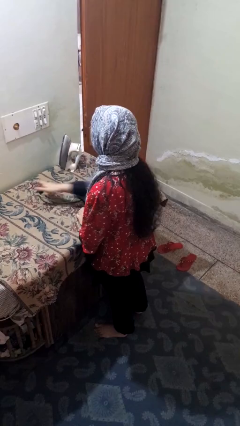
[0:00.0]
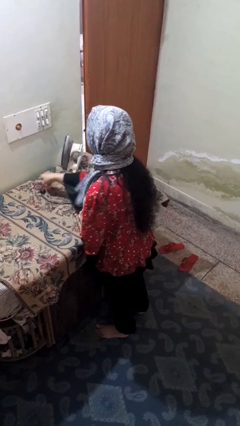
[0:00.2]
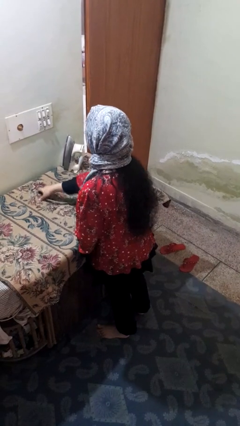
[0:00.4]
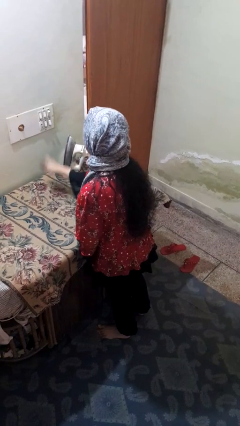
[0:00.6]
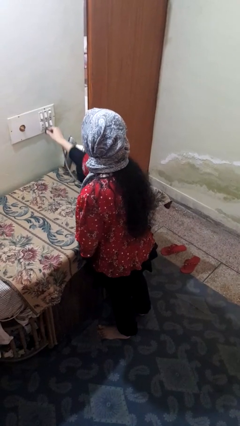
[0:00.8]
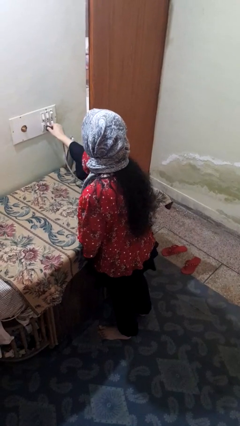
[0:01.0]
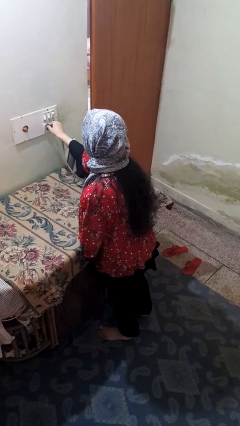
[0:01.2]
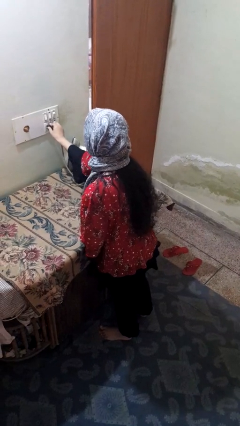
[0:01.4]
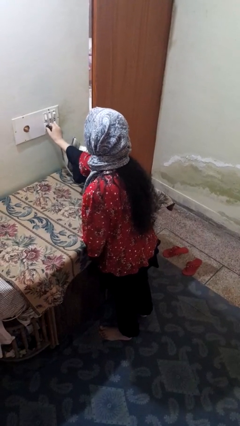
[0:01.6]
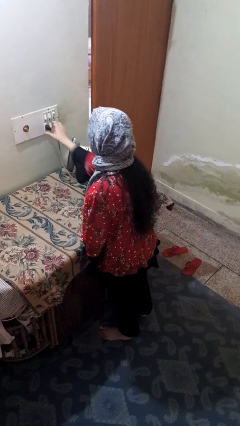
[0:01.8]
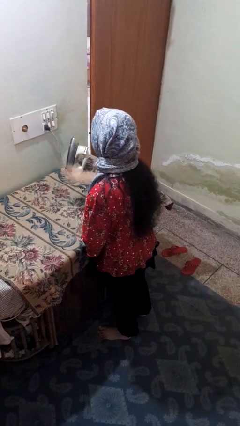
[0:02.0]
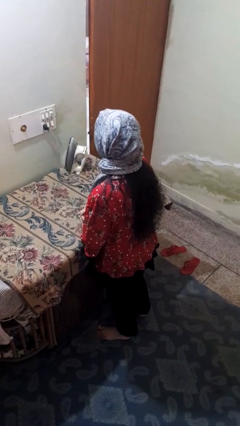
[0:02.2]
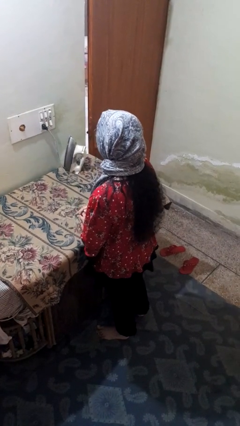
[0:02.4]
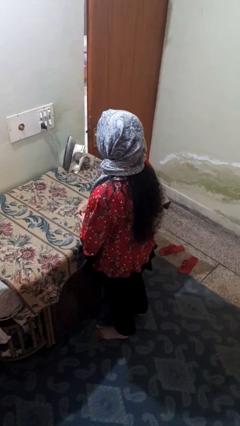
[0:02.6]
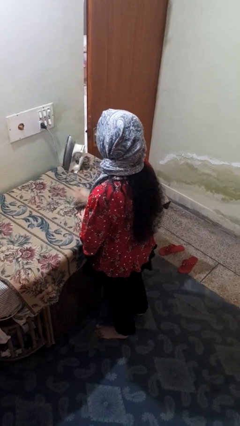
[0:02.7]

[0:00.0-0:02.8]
person plugs into electrical socket

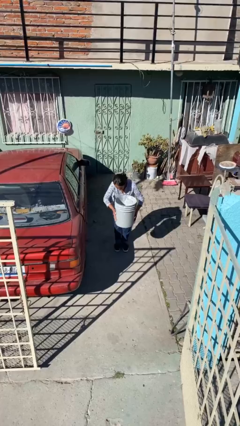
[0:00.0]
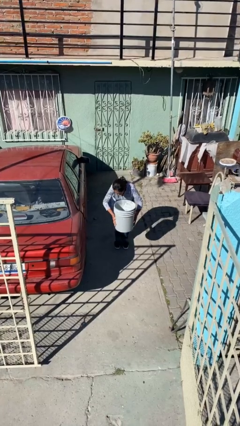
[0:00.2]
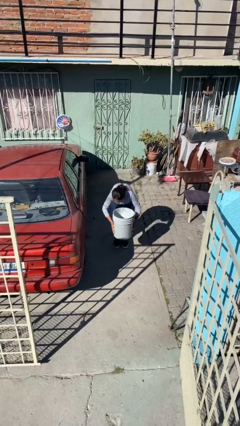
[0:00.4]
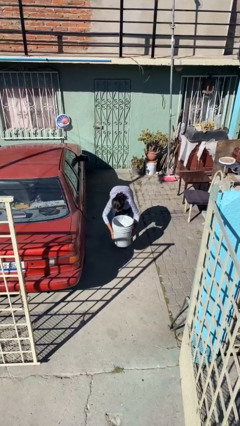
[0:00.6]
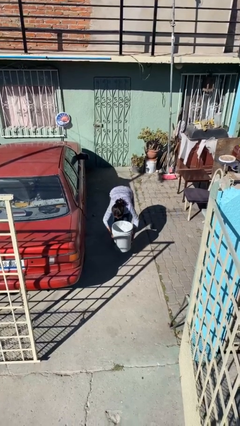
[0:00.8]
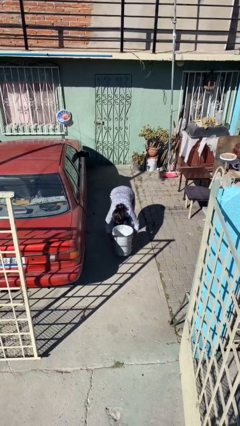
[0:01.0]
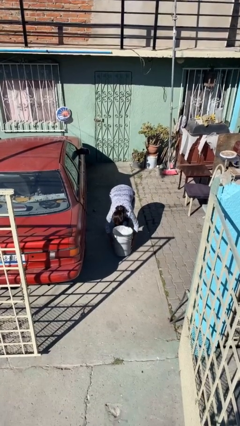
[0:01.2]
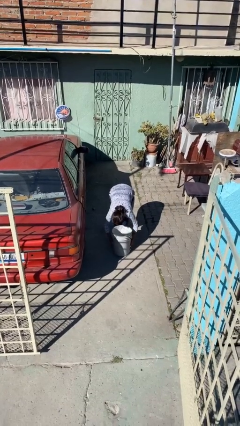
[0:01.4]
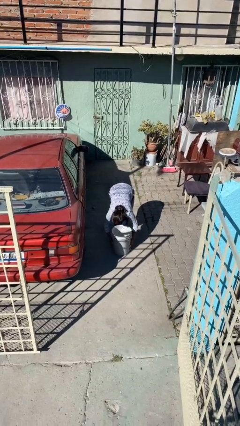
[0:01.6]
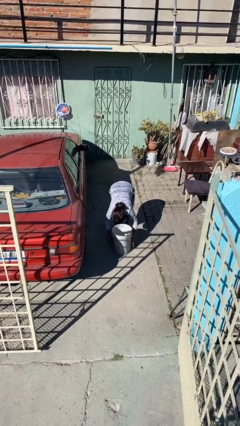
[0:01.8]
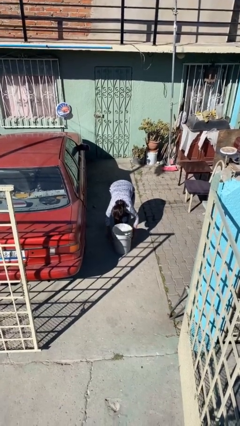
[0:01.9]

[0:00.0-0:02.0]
person puts down object on floor

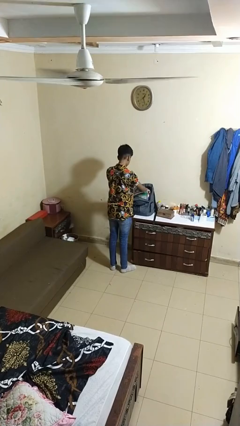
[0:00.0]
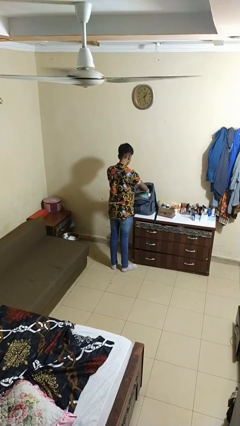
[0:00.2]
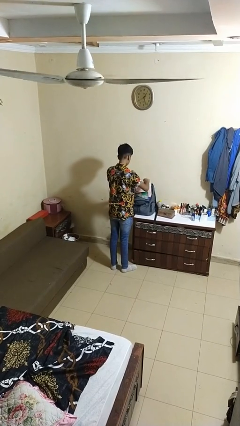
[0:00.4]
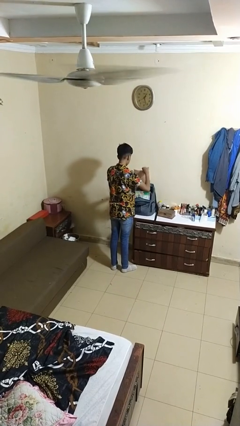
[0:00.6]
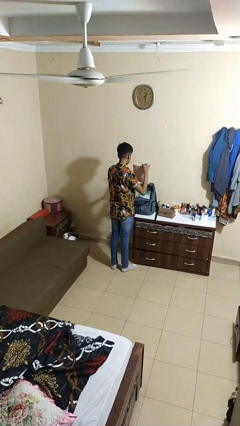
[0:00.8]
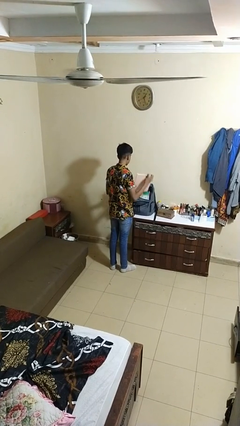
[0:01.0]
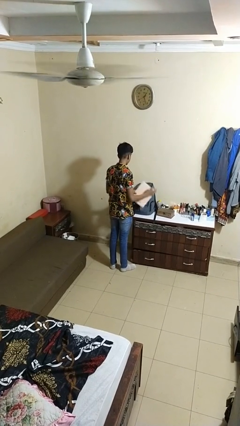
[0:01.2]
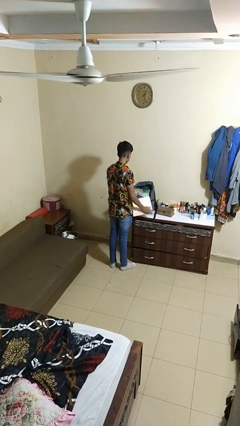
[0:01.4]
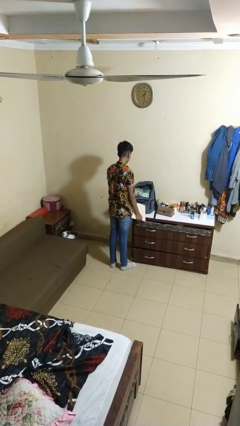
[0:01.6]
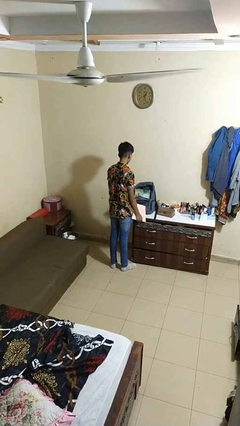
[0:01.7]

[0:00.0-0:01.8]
person takes object from backpack

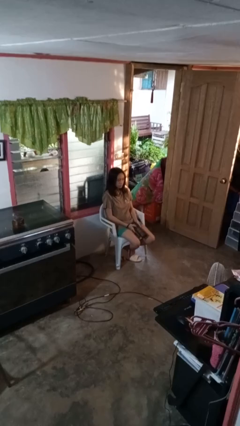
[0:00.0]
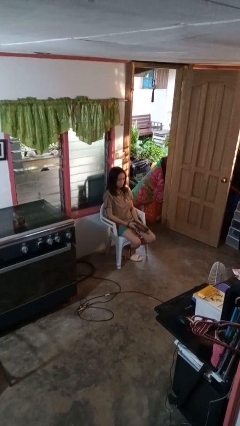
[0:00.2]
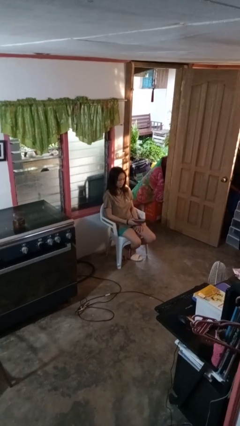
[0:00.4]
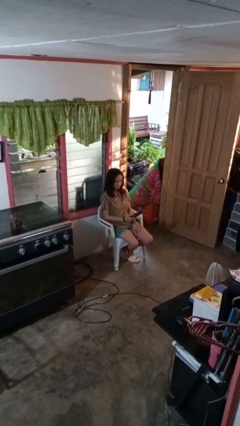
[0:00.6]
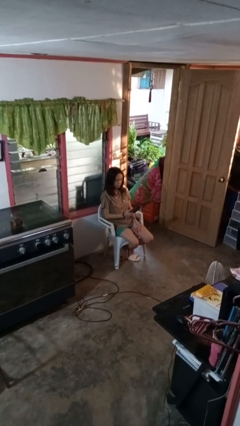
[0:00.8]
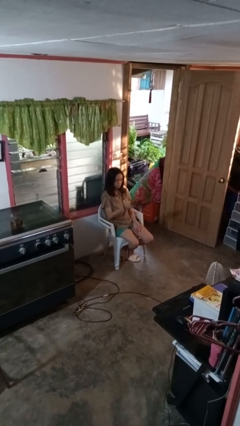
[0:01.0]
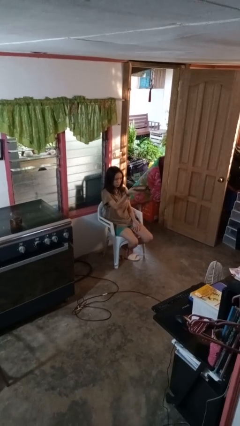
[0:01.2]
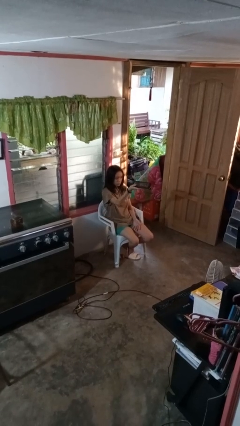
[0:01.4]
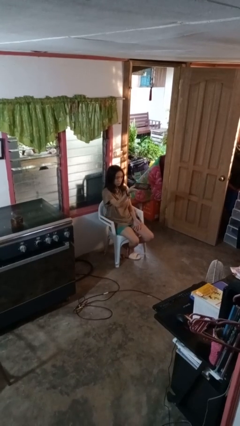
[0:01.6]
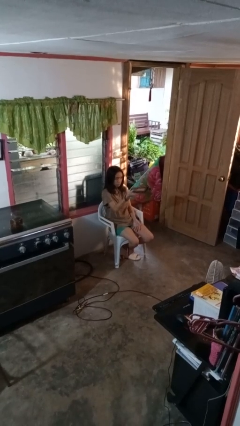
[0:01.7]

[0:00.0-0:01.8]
person uses television remote

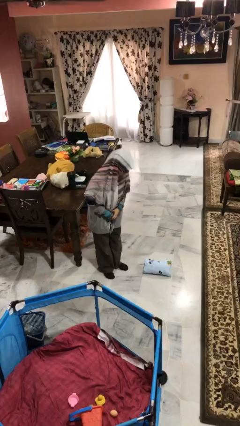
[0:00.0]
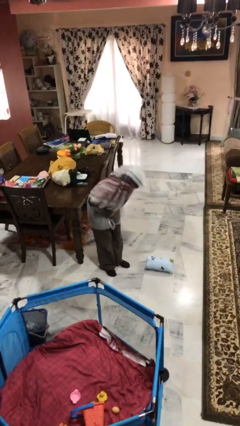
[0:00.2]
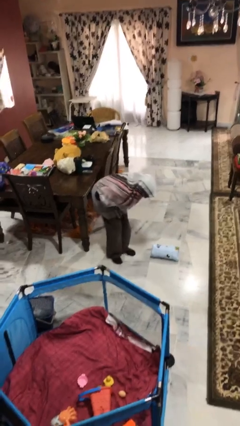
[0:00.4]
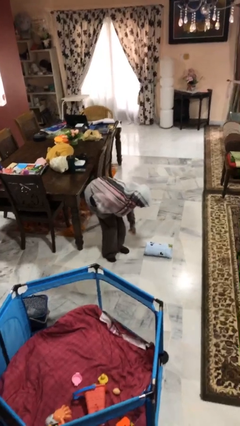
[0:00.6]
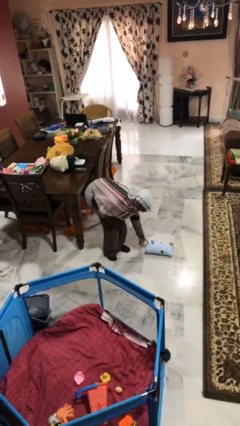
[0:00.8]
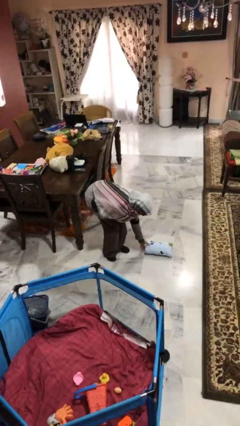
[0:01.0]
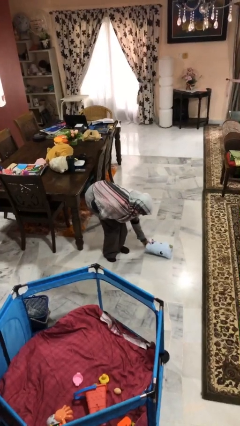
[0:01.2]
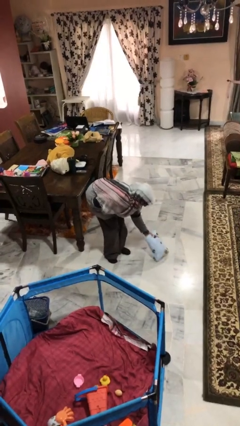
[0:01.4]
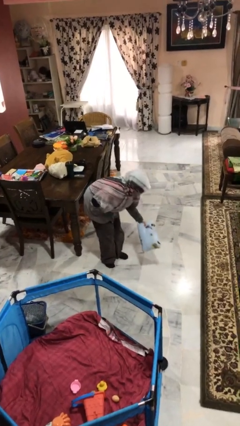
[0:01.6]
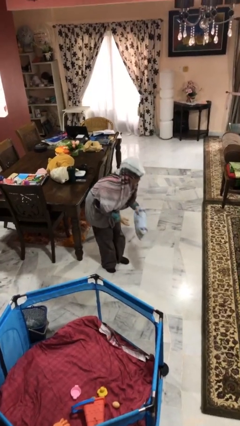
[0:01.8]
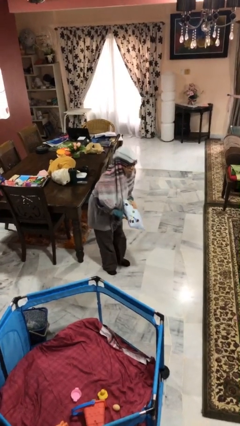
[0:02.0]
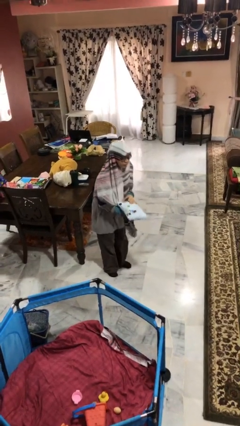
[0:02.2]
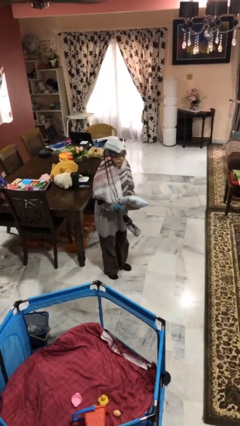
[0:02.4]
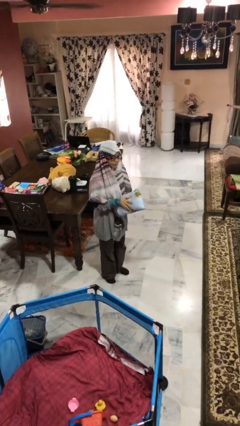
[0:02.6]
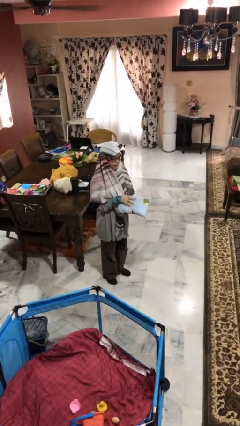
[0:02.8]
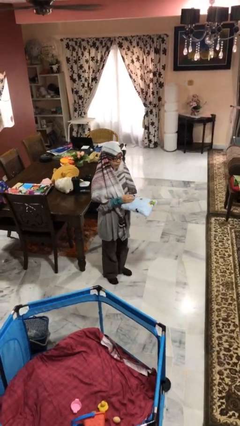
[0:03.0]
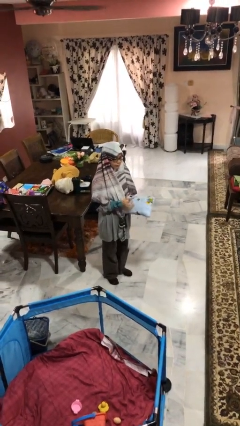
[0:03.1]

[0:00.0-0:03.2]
person picks up object from floor

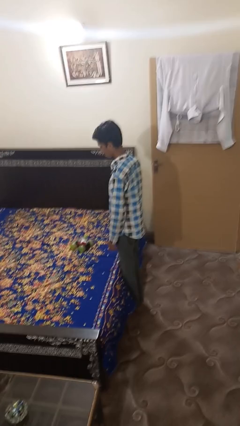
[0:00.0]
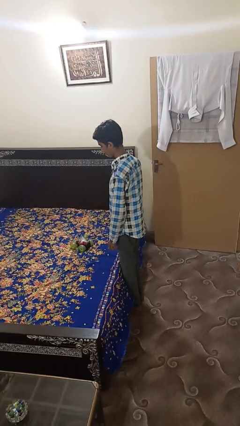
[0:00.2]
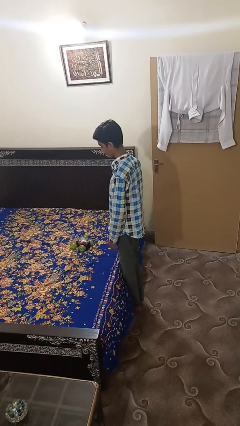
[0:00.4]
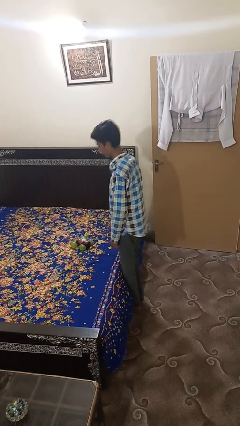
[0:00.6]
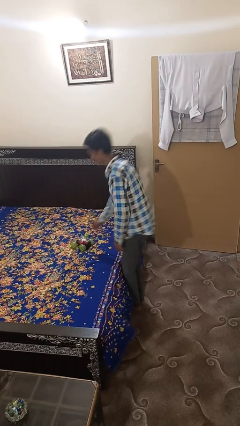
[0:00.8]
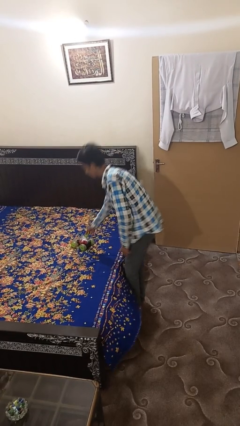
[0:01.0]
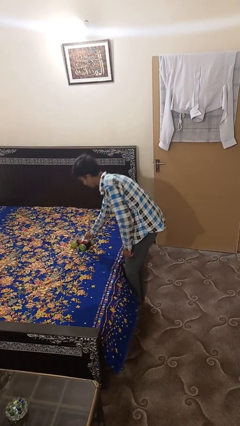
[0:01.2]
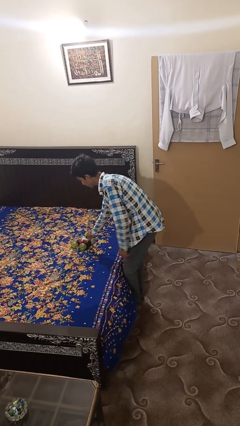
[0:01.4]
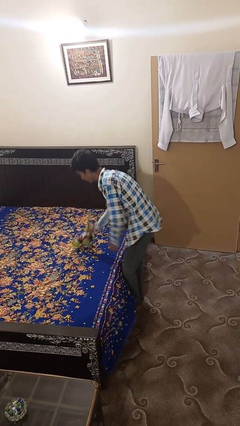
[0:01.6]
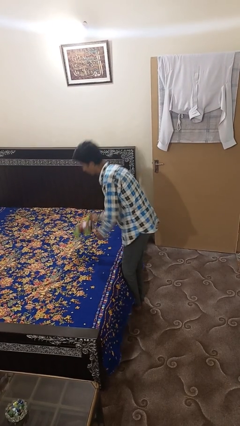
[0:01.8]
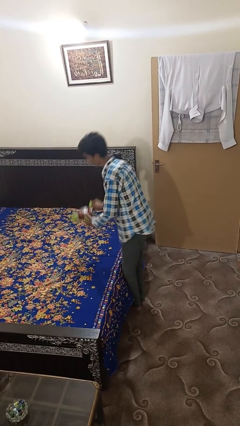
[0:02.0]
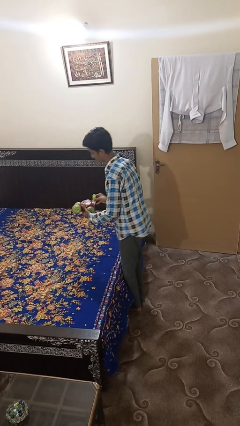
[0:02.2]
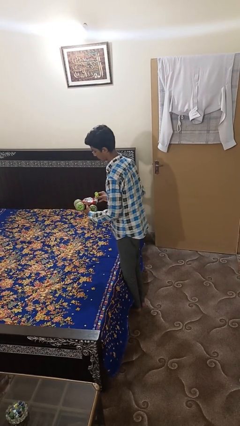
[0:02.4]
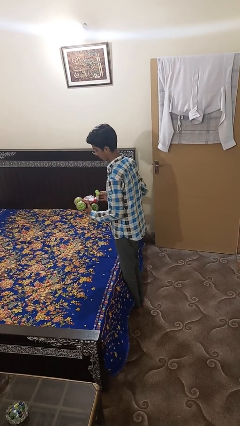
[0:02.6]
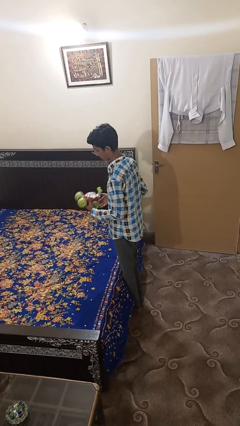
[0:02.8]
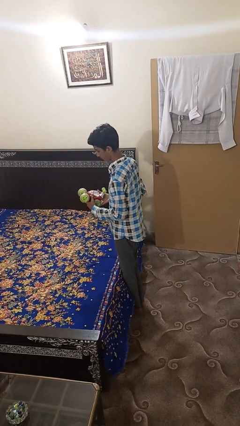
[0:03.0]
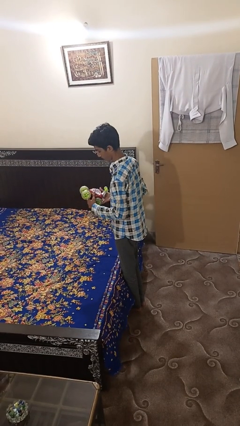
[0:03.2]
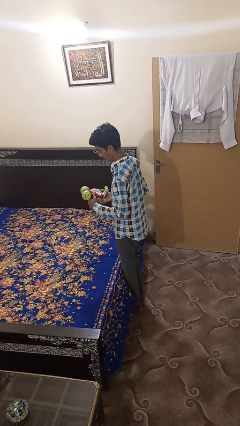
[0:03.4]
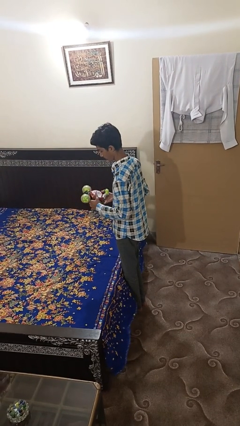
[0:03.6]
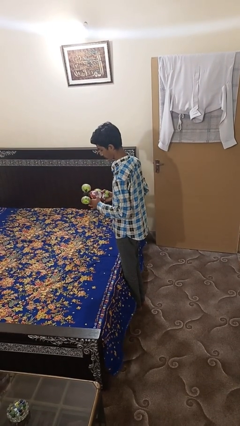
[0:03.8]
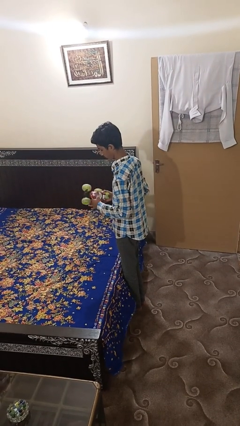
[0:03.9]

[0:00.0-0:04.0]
person picks up object from bed

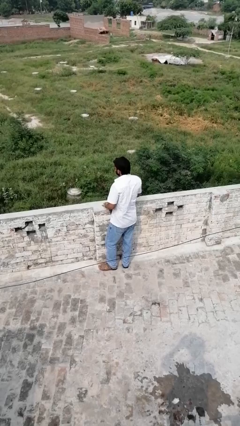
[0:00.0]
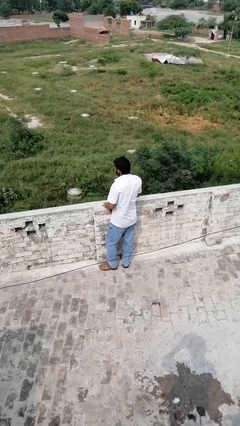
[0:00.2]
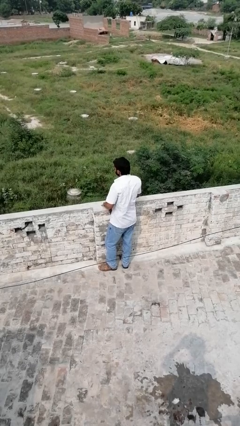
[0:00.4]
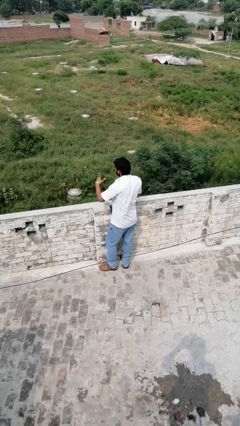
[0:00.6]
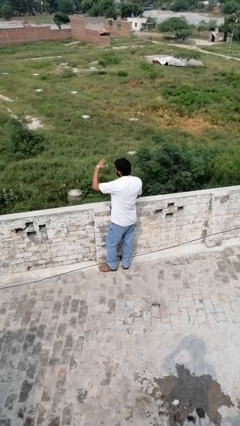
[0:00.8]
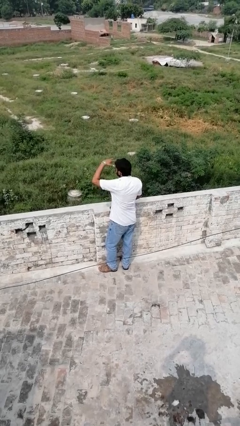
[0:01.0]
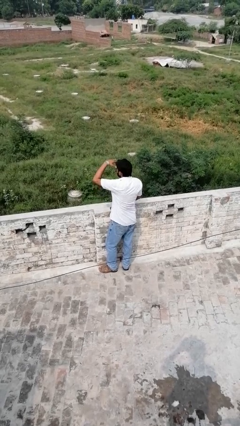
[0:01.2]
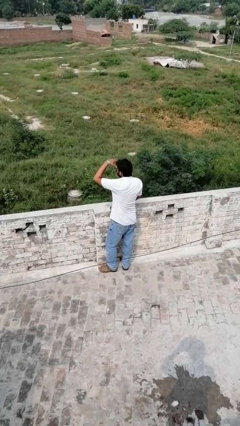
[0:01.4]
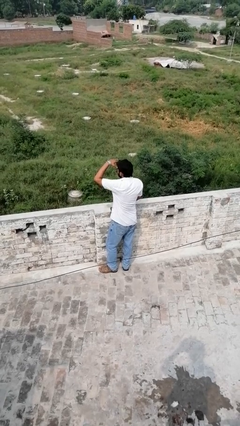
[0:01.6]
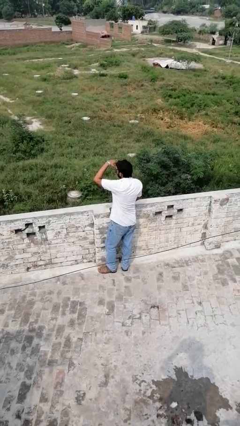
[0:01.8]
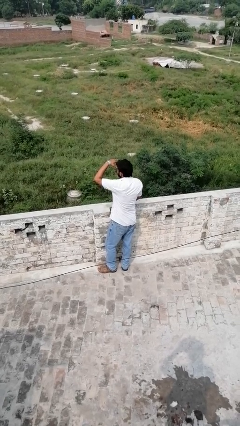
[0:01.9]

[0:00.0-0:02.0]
person shades eyes
